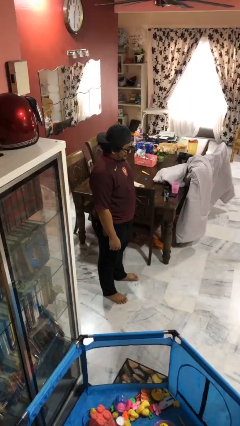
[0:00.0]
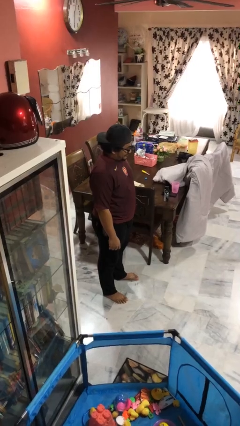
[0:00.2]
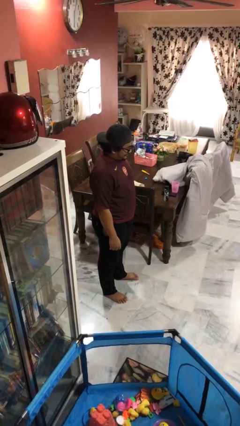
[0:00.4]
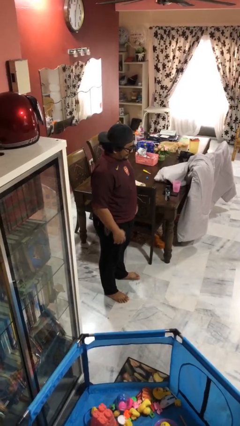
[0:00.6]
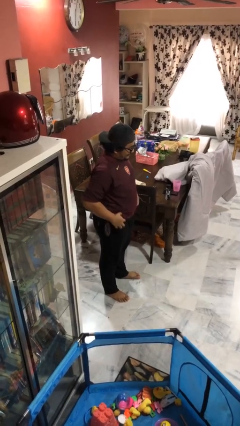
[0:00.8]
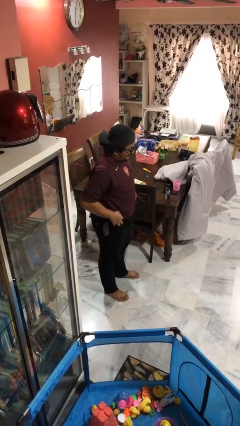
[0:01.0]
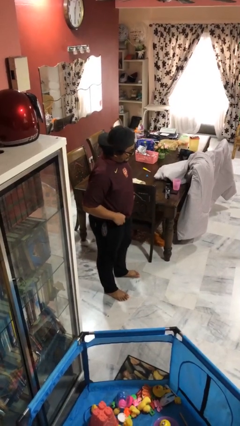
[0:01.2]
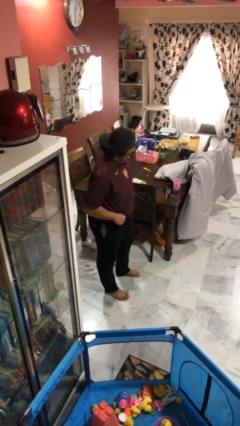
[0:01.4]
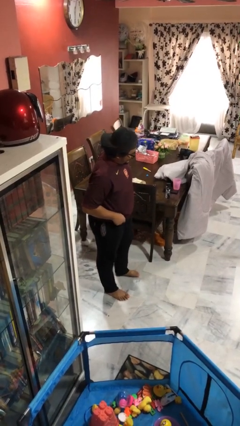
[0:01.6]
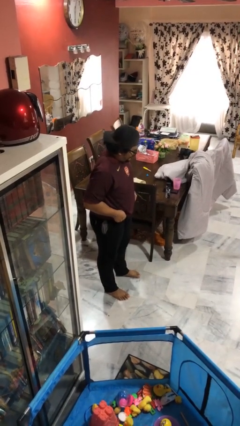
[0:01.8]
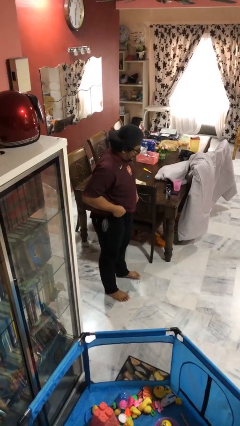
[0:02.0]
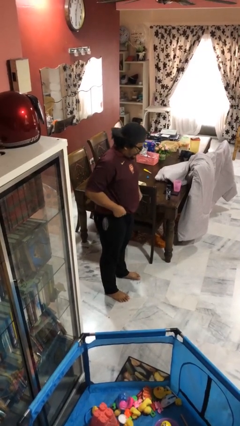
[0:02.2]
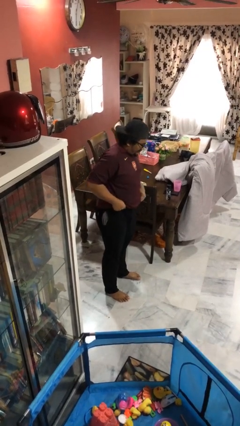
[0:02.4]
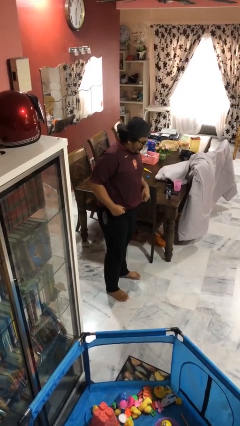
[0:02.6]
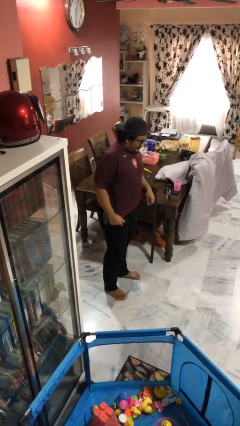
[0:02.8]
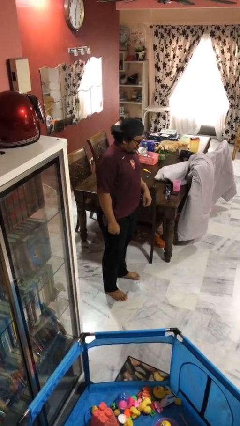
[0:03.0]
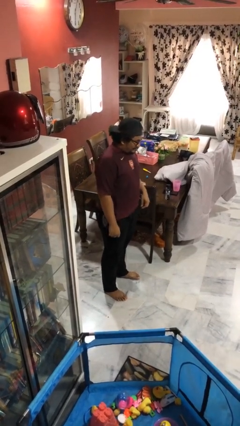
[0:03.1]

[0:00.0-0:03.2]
person hikes up pants

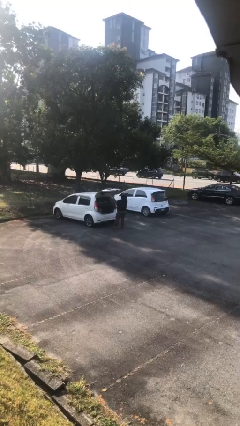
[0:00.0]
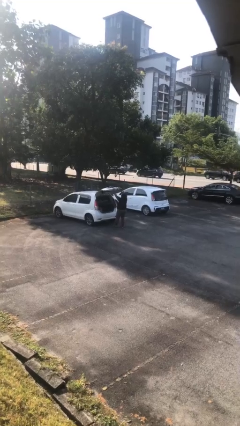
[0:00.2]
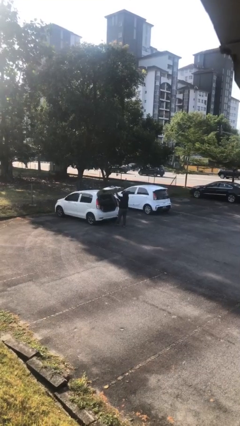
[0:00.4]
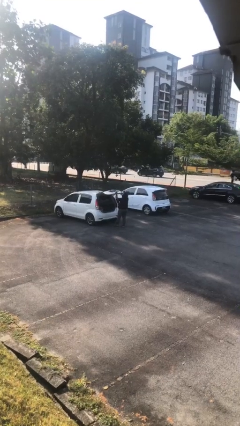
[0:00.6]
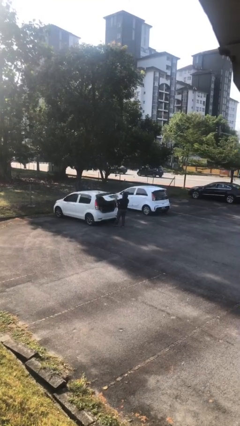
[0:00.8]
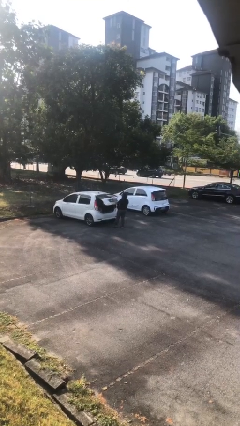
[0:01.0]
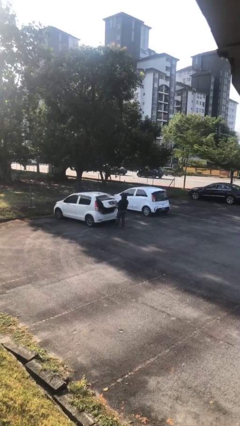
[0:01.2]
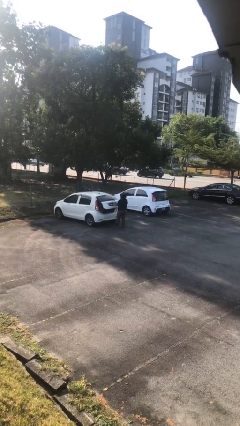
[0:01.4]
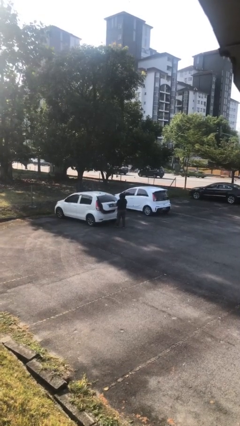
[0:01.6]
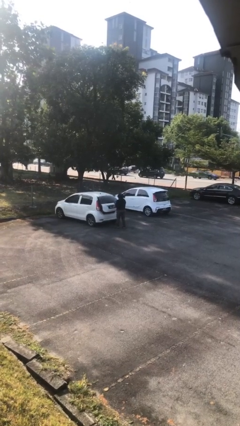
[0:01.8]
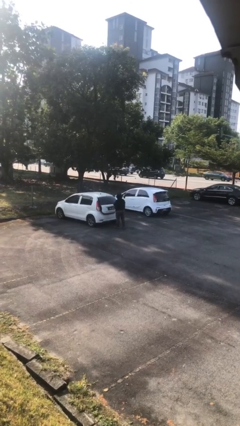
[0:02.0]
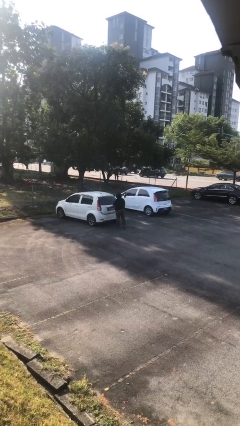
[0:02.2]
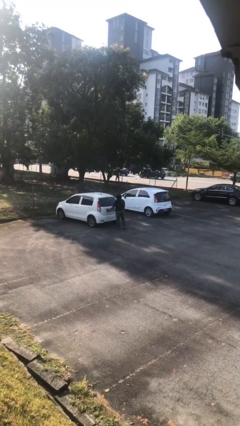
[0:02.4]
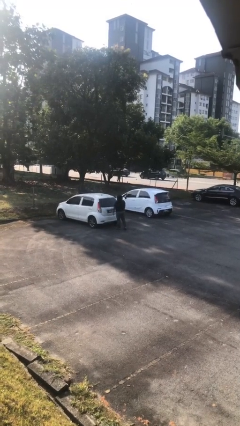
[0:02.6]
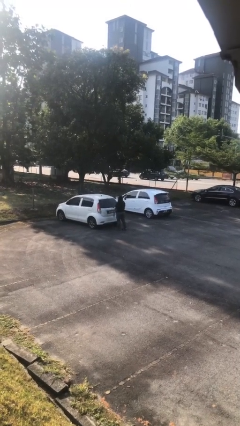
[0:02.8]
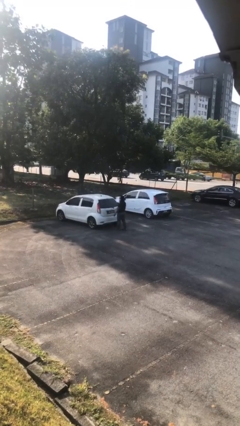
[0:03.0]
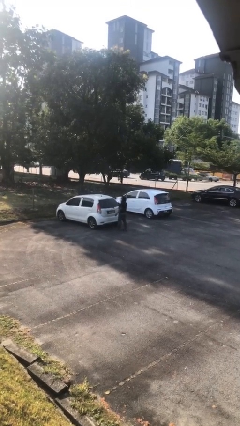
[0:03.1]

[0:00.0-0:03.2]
person closes car trunk

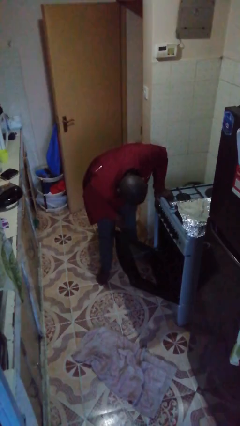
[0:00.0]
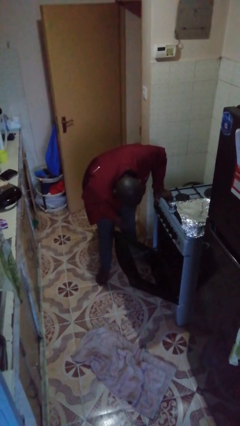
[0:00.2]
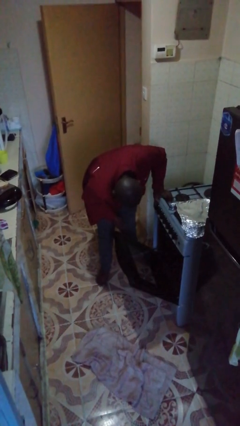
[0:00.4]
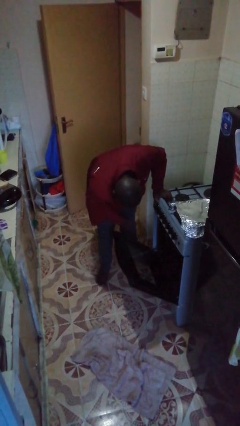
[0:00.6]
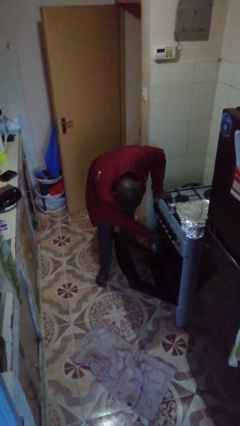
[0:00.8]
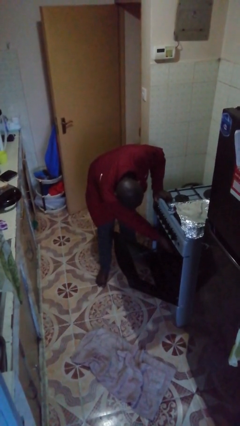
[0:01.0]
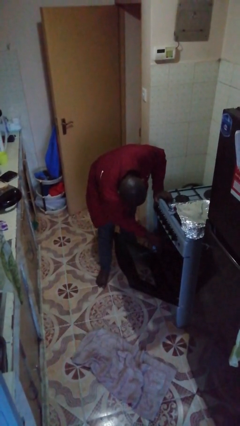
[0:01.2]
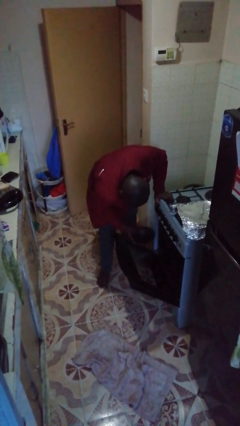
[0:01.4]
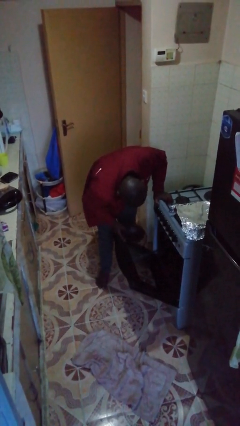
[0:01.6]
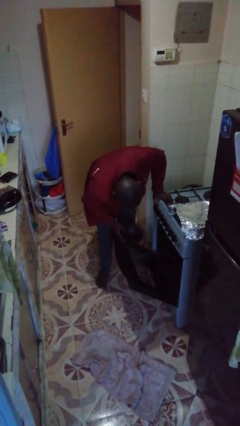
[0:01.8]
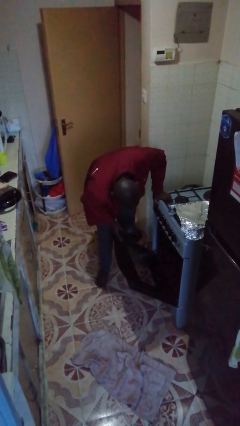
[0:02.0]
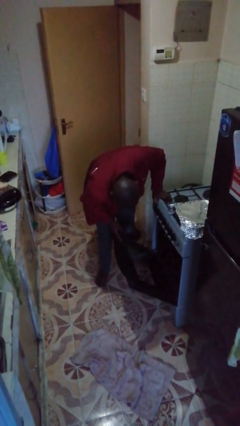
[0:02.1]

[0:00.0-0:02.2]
person takes object from oven

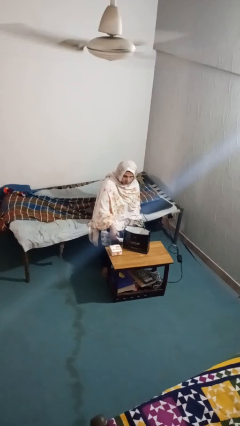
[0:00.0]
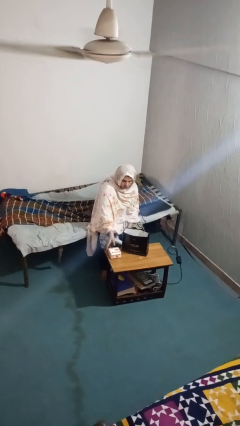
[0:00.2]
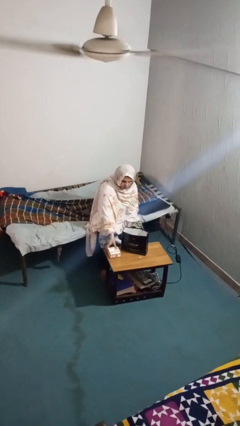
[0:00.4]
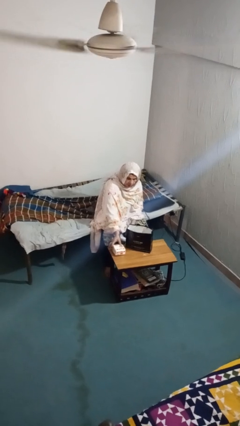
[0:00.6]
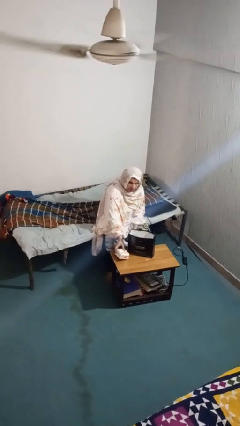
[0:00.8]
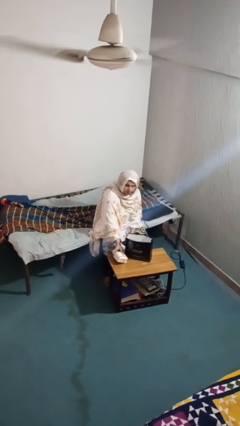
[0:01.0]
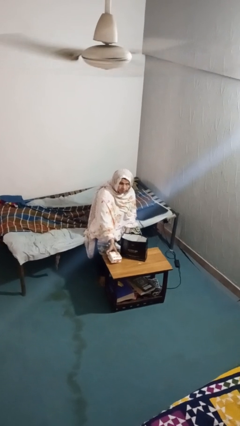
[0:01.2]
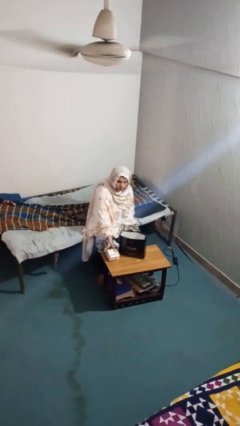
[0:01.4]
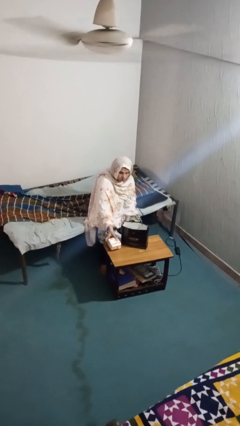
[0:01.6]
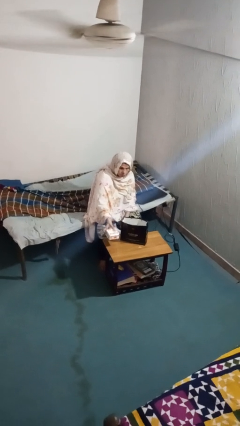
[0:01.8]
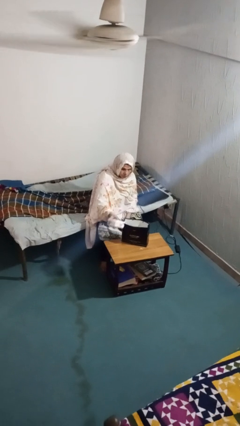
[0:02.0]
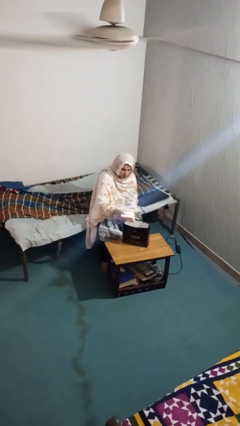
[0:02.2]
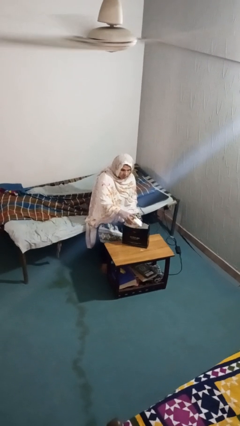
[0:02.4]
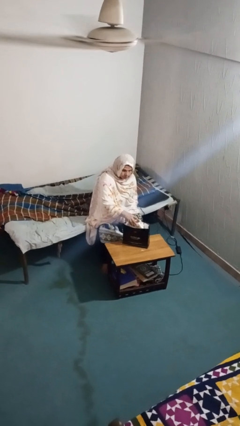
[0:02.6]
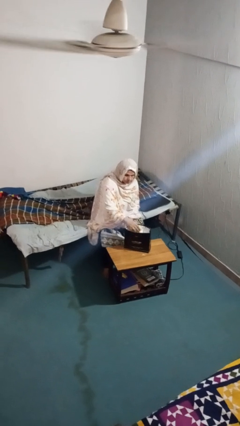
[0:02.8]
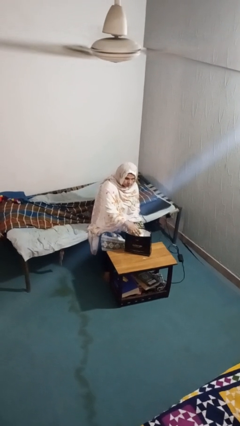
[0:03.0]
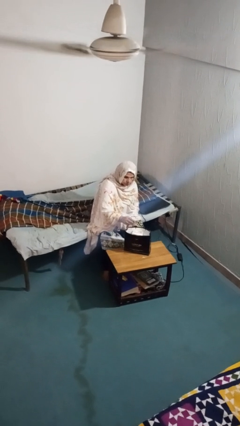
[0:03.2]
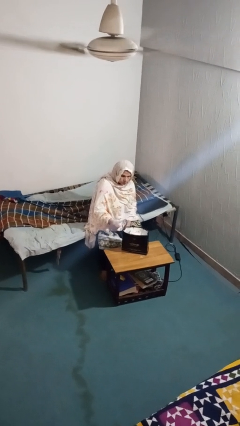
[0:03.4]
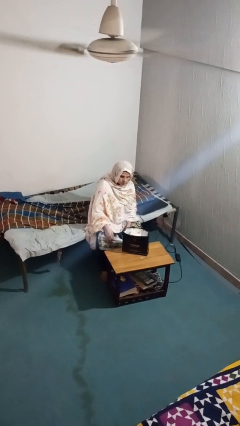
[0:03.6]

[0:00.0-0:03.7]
person puts object into bag

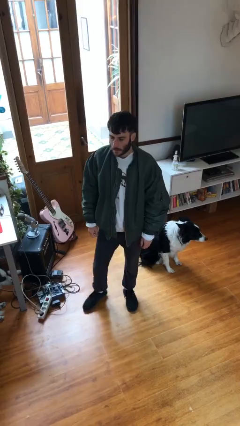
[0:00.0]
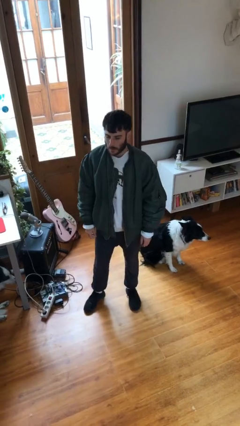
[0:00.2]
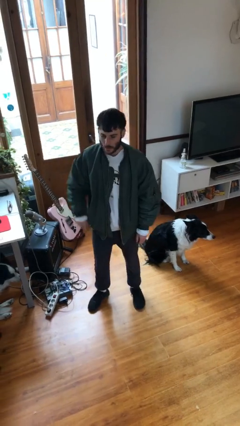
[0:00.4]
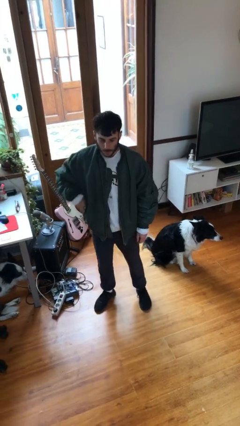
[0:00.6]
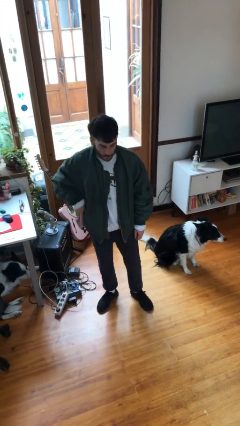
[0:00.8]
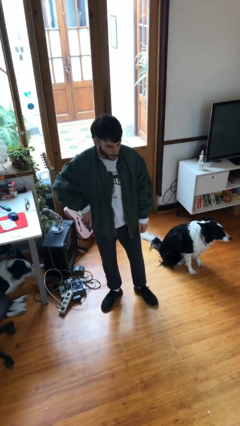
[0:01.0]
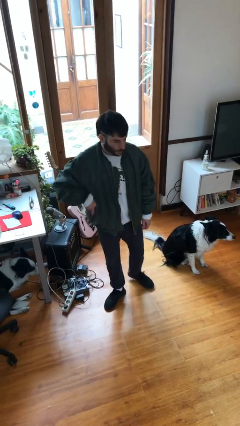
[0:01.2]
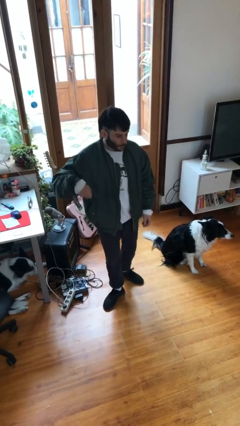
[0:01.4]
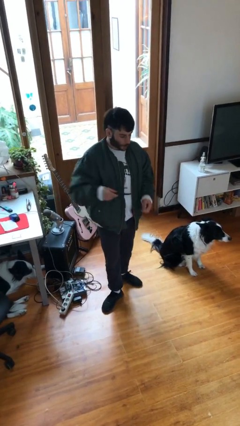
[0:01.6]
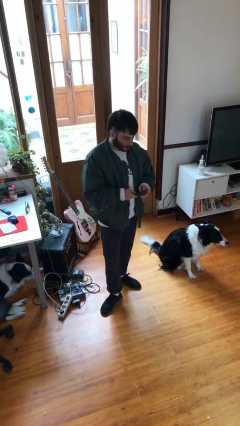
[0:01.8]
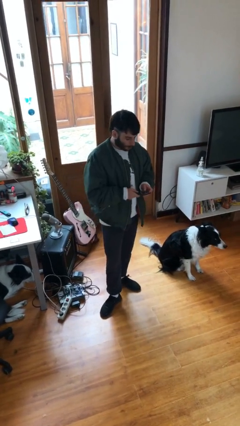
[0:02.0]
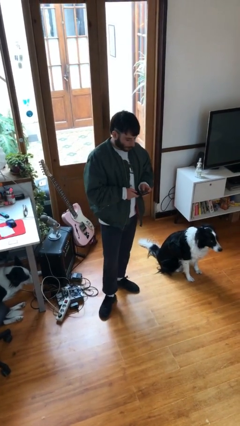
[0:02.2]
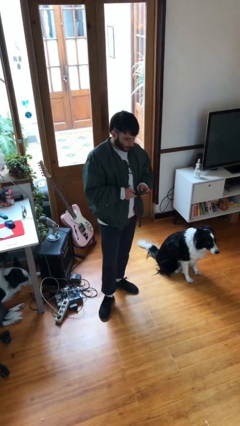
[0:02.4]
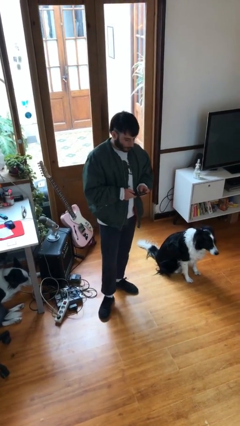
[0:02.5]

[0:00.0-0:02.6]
person takes phone from pocket

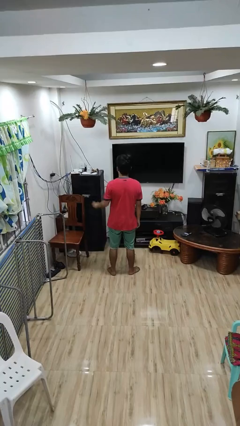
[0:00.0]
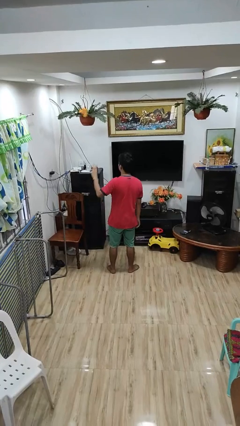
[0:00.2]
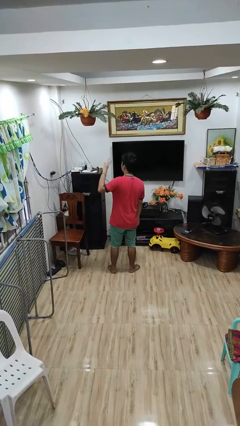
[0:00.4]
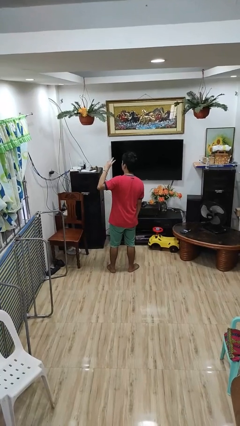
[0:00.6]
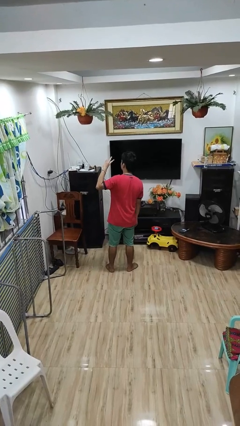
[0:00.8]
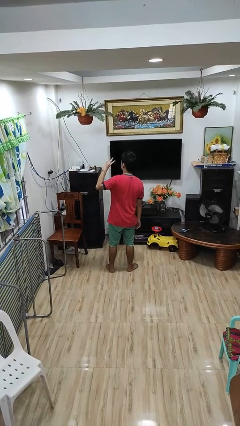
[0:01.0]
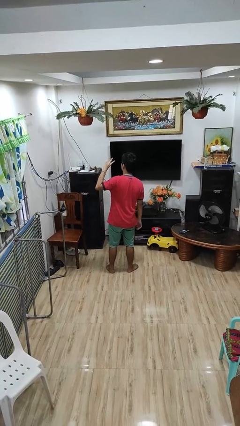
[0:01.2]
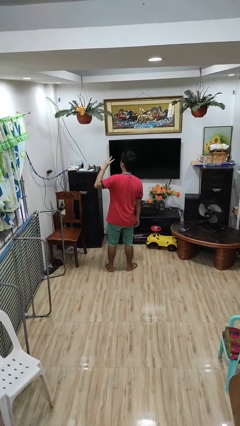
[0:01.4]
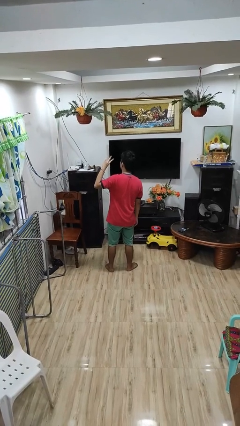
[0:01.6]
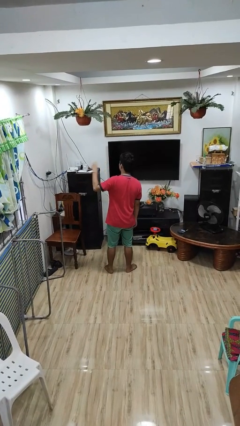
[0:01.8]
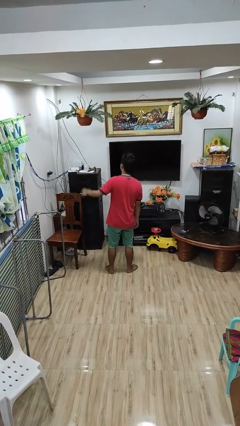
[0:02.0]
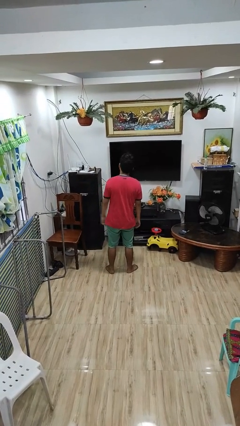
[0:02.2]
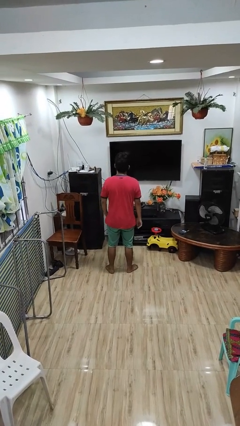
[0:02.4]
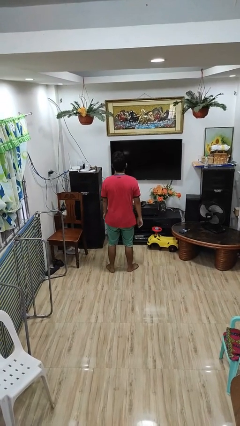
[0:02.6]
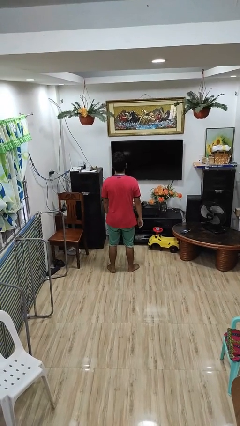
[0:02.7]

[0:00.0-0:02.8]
person gestures peace
